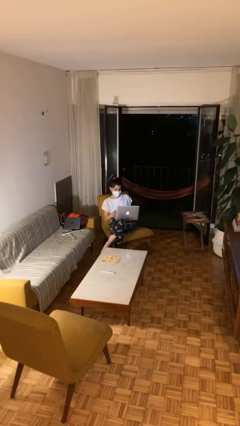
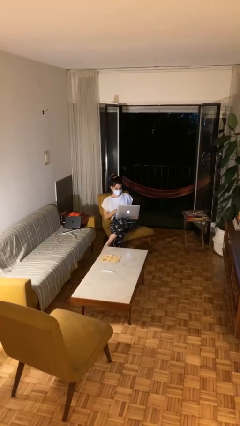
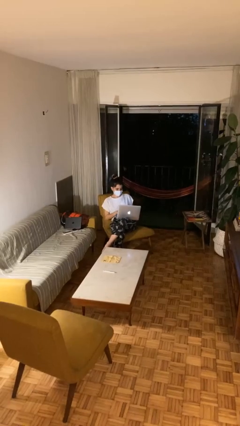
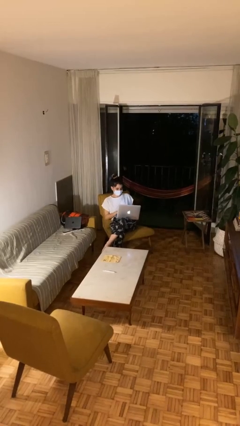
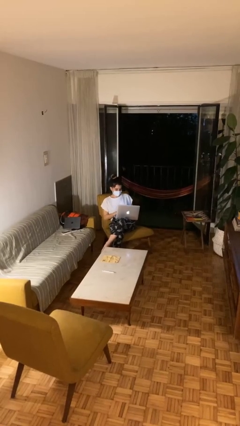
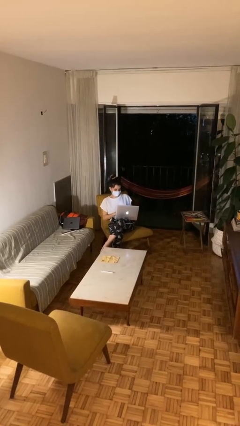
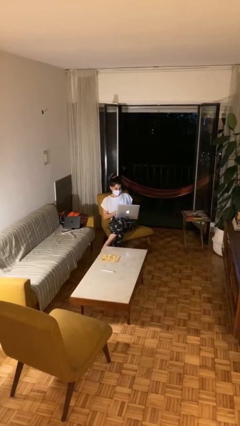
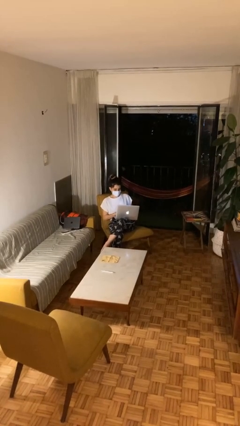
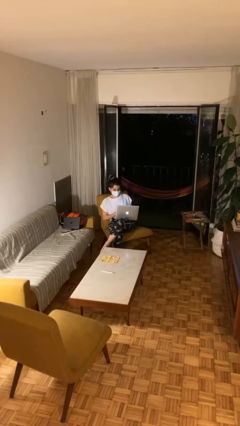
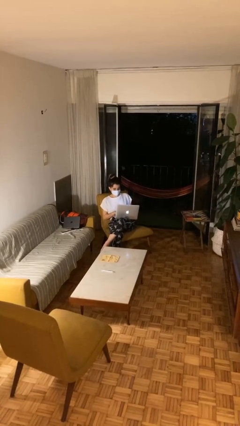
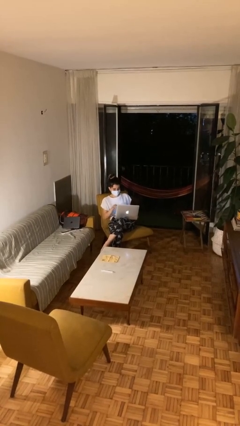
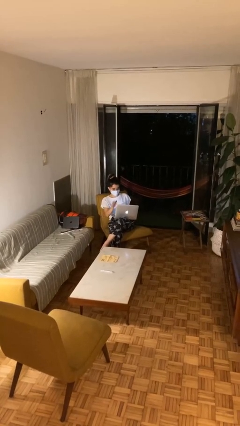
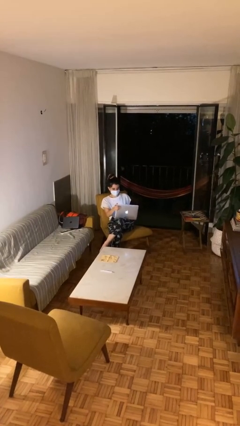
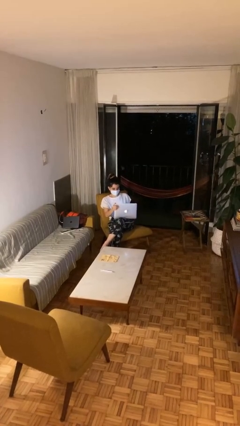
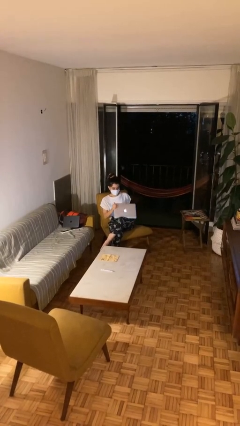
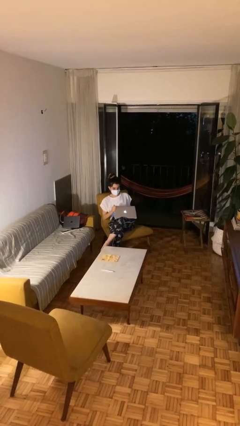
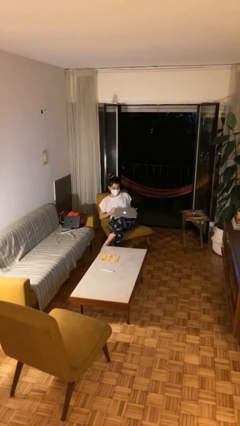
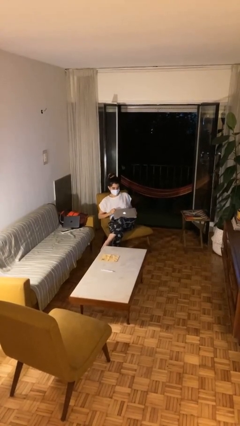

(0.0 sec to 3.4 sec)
person interacts with laptop

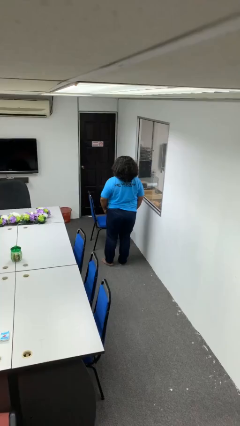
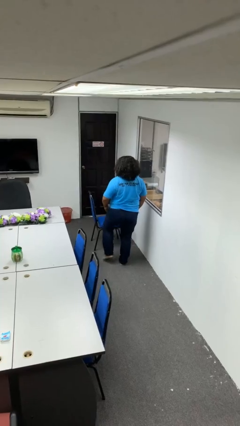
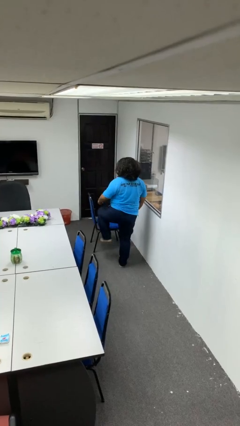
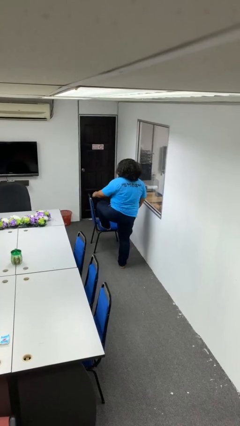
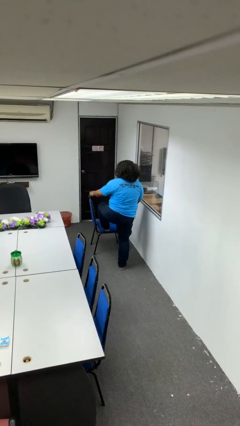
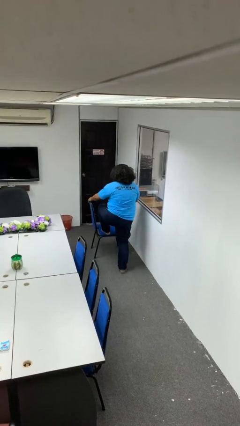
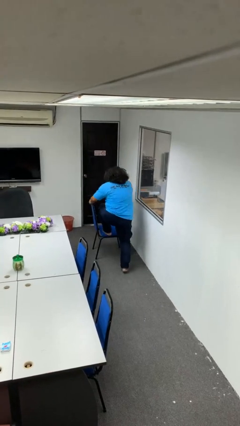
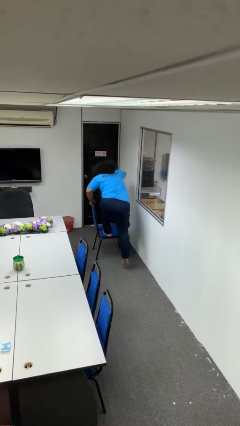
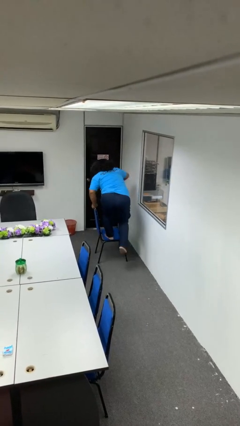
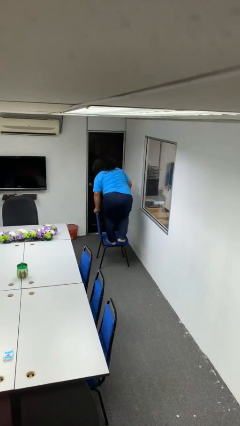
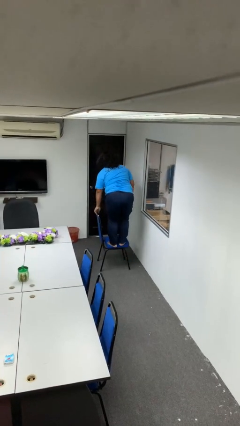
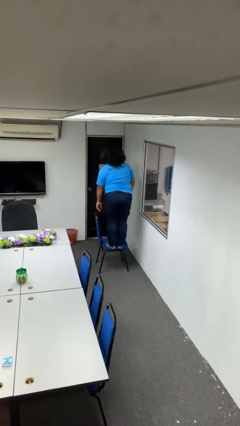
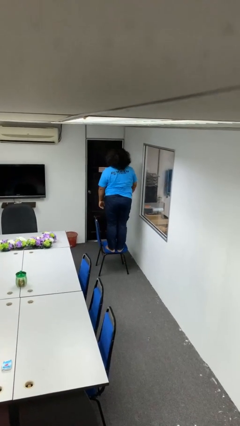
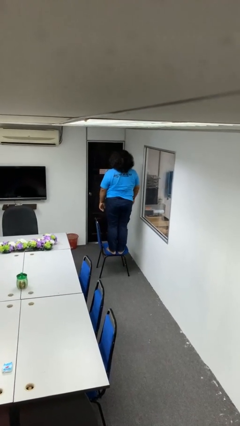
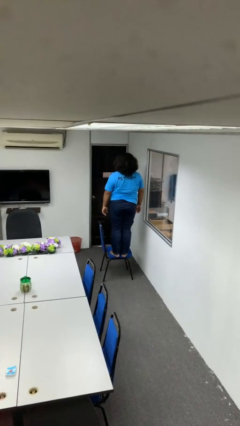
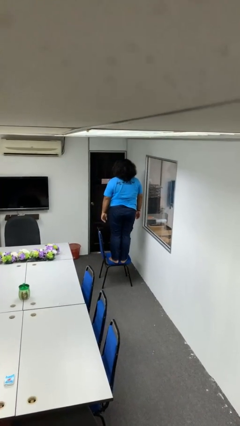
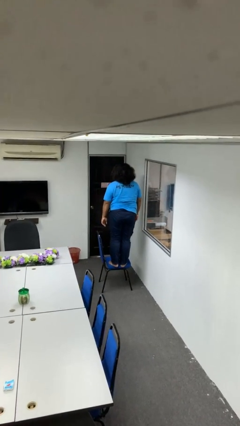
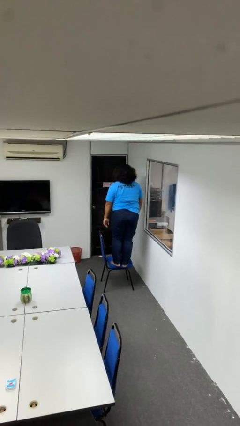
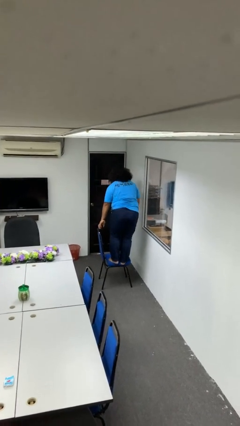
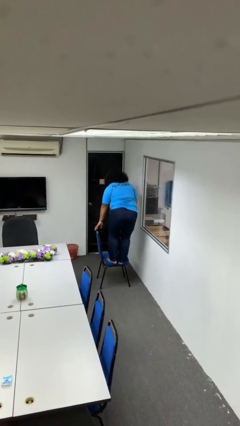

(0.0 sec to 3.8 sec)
person climbs on chair

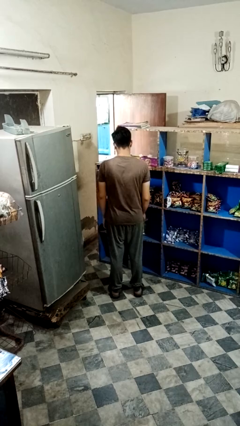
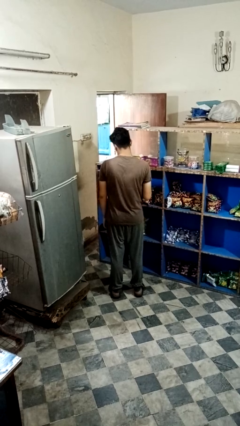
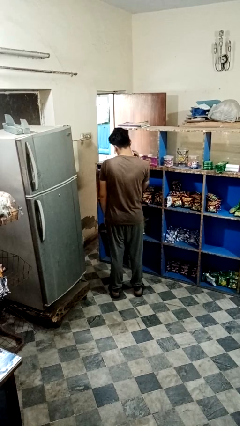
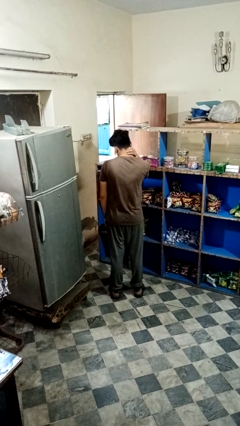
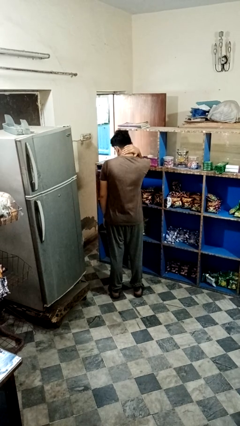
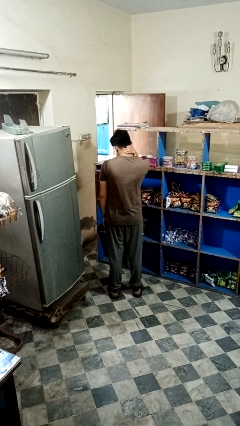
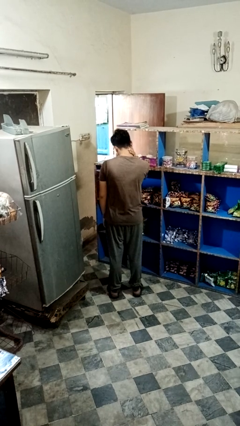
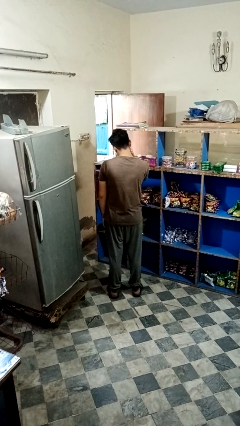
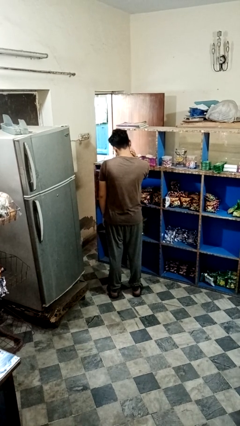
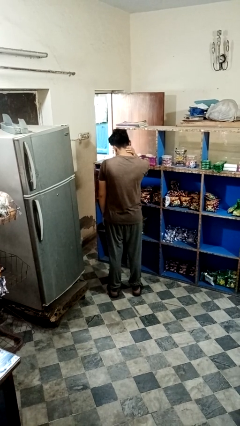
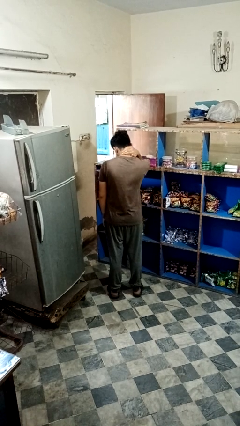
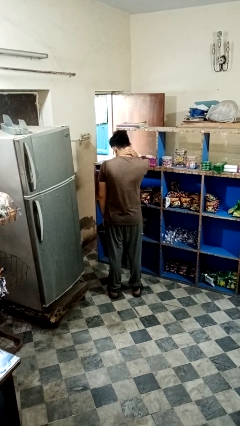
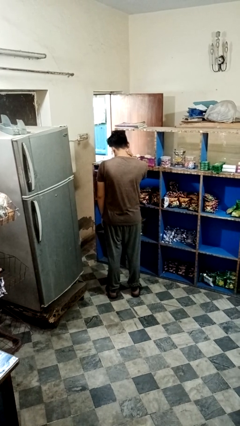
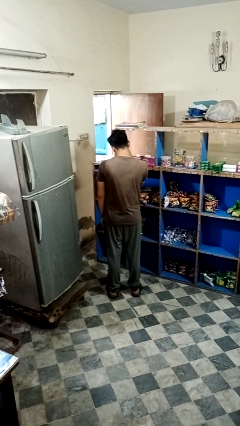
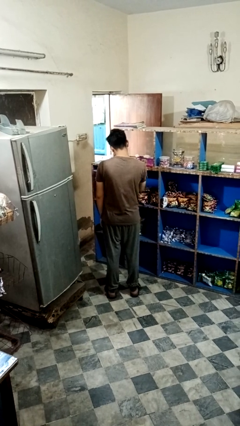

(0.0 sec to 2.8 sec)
person rubs neck

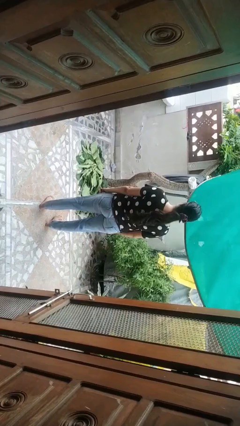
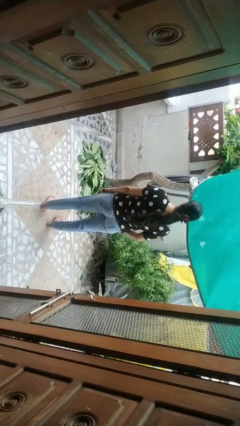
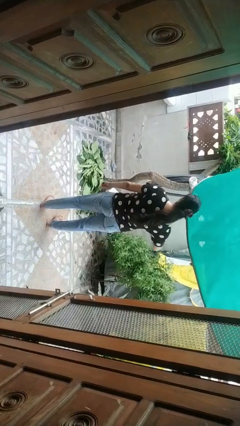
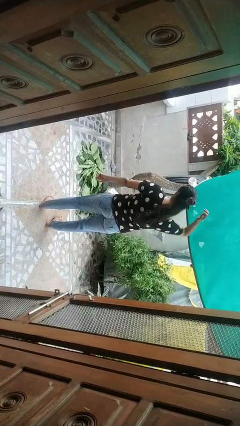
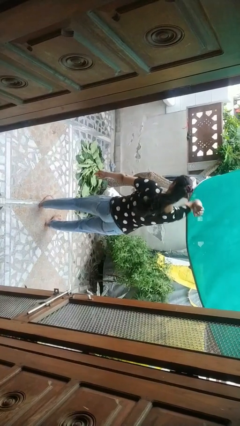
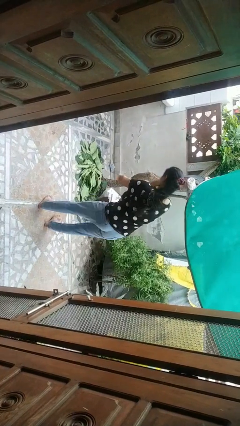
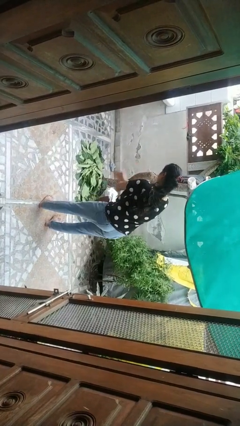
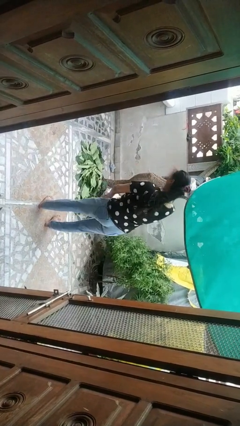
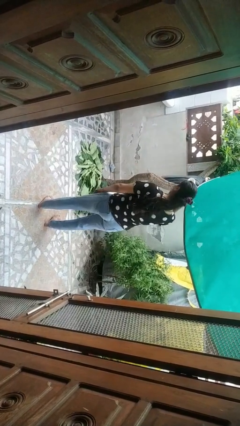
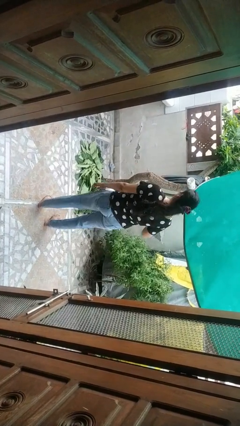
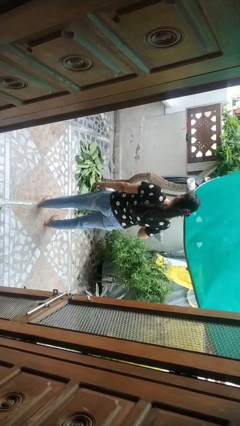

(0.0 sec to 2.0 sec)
person karate chop

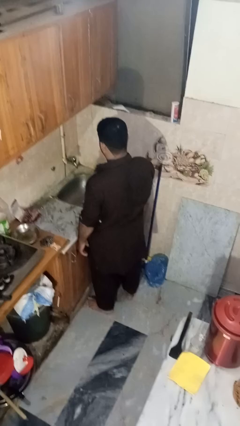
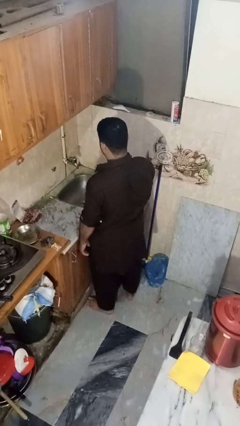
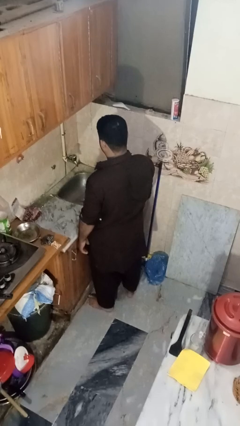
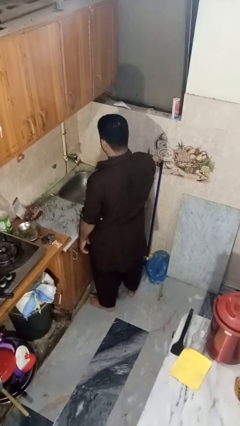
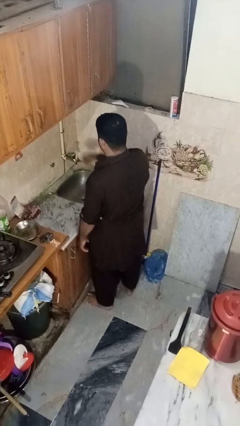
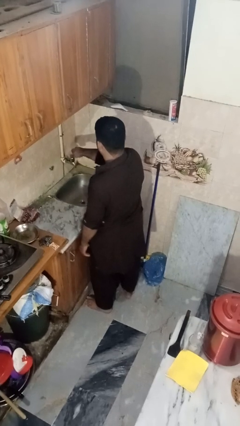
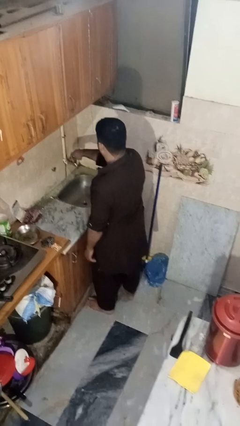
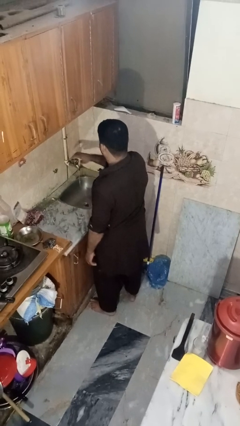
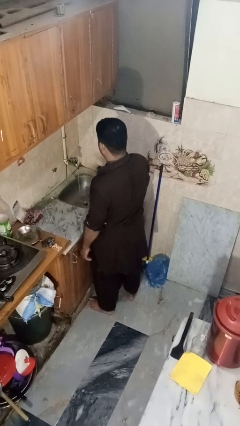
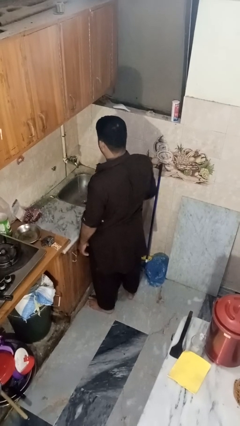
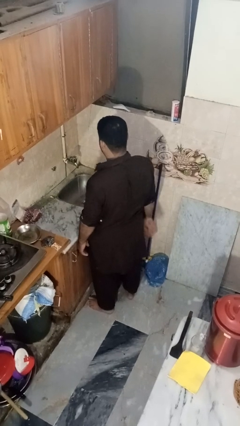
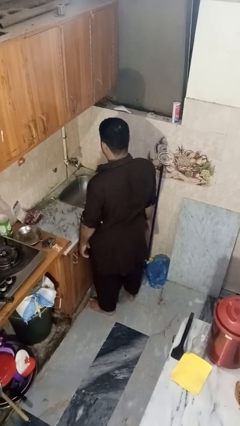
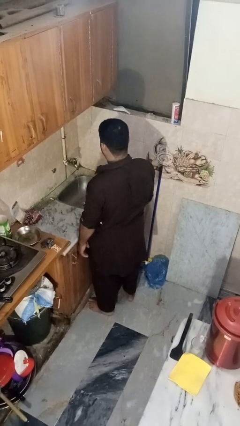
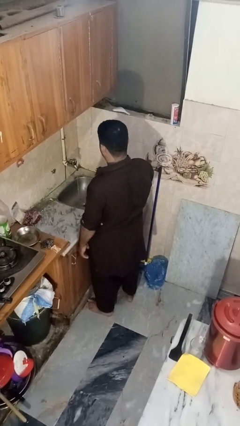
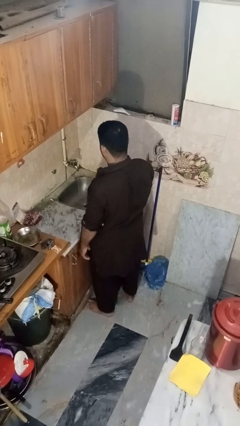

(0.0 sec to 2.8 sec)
person turns on faucet

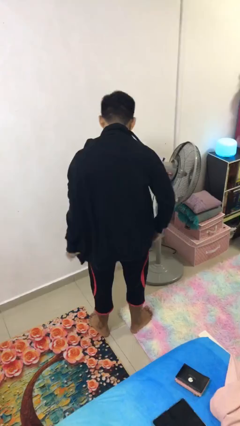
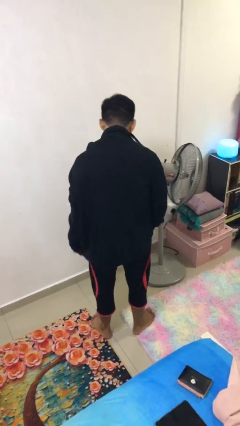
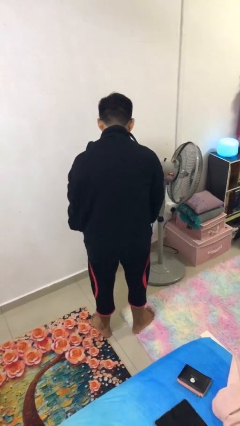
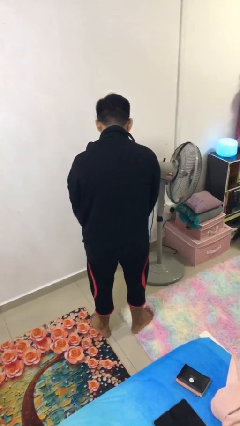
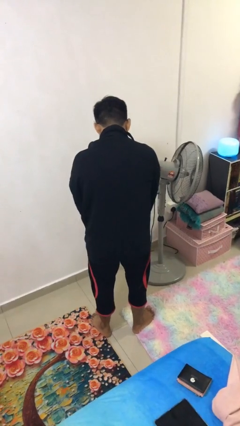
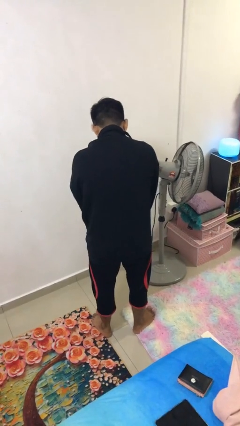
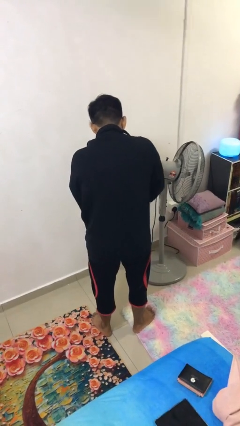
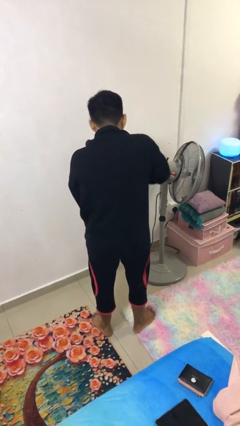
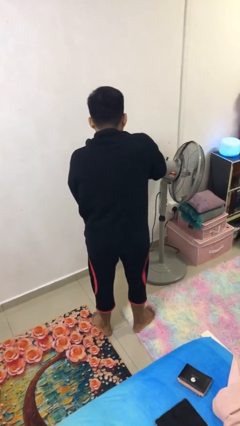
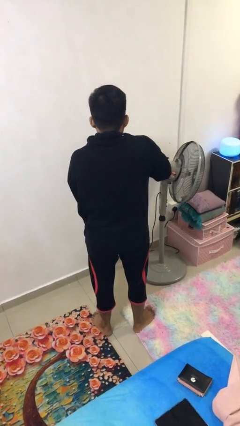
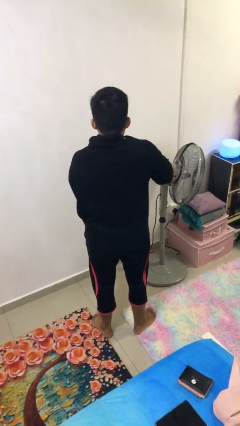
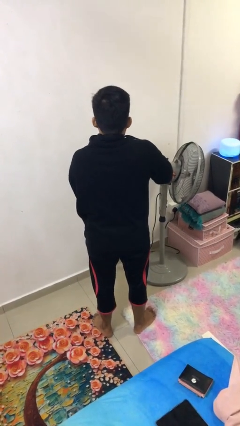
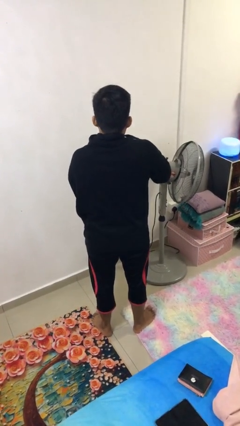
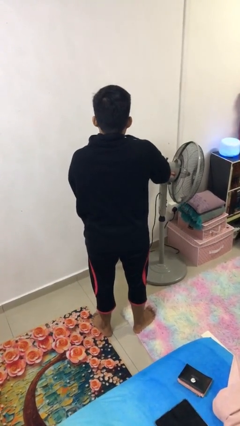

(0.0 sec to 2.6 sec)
person zips up jacket
